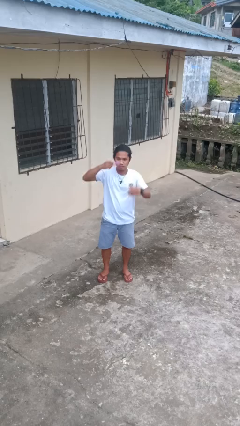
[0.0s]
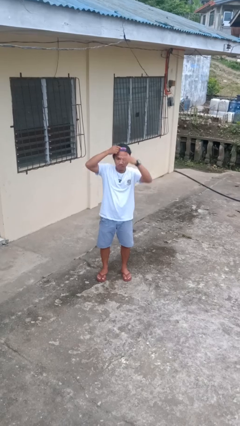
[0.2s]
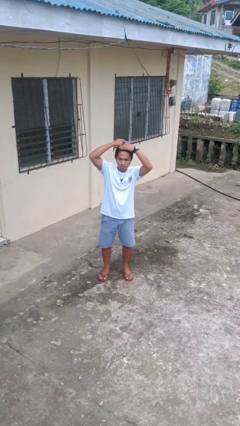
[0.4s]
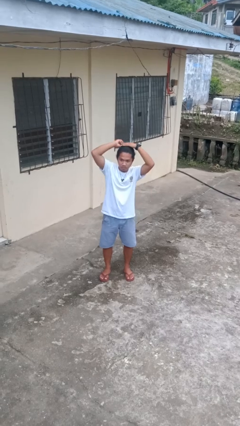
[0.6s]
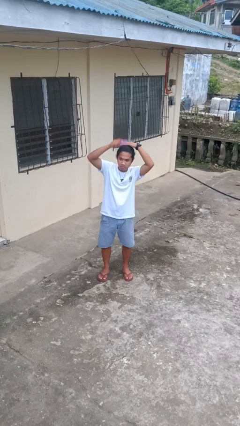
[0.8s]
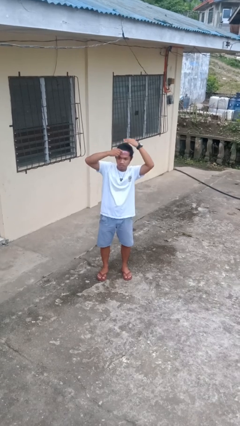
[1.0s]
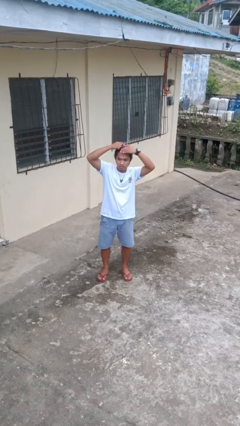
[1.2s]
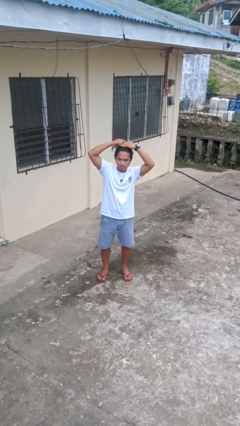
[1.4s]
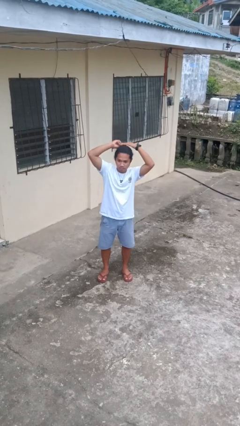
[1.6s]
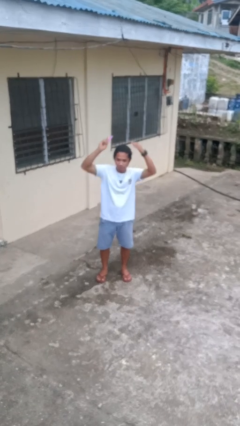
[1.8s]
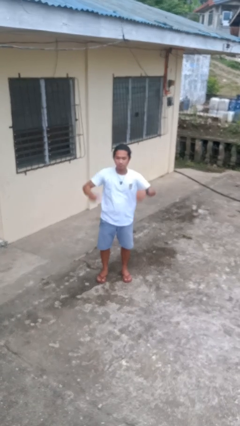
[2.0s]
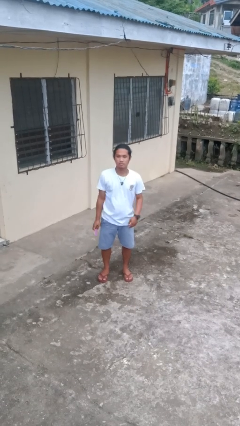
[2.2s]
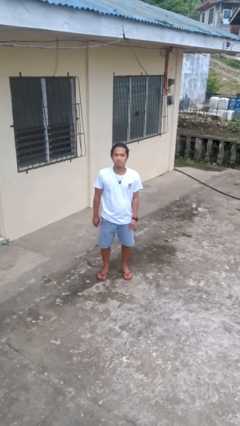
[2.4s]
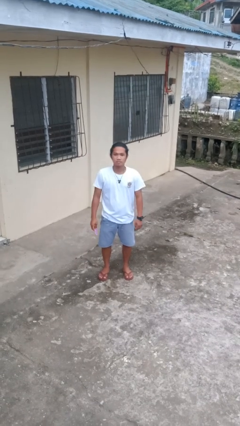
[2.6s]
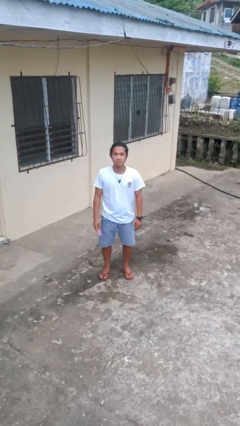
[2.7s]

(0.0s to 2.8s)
person brushes hair

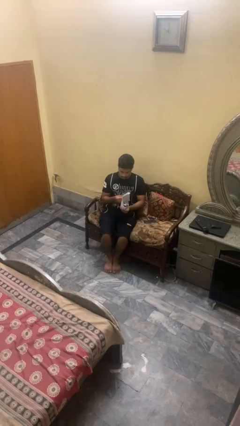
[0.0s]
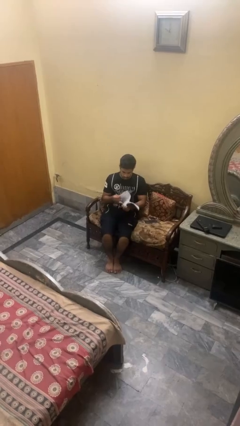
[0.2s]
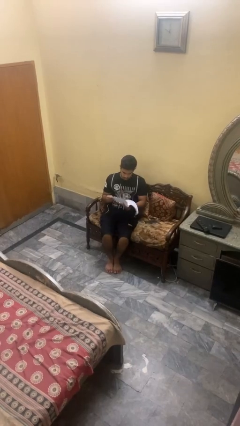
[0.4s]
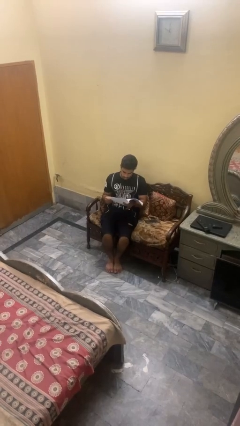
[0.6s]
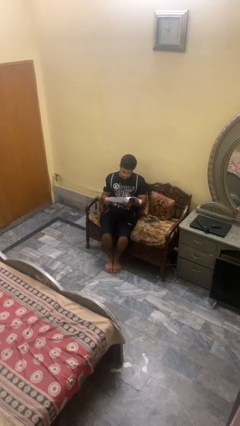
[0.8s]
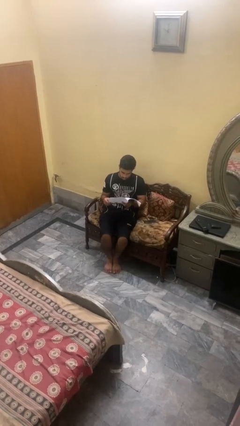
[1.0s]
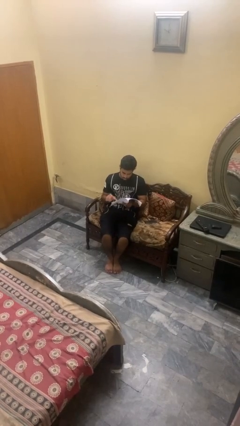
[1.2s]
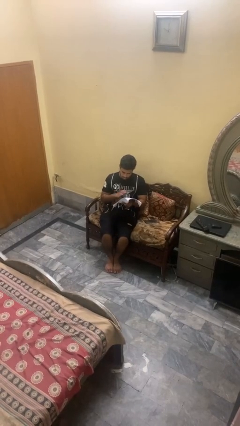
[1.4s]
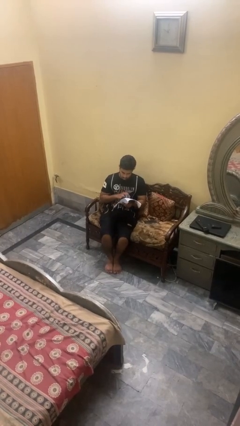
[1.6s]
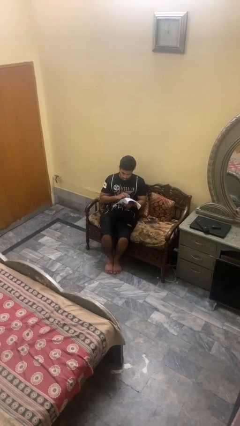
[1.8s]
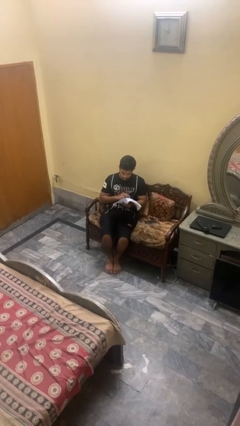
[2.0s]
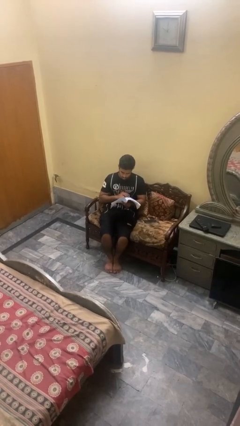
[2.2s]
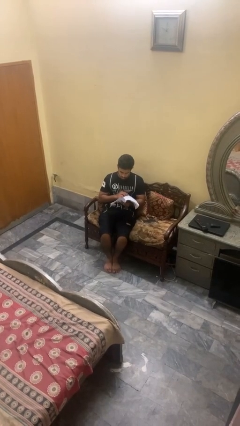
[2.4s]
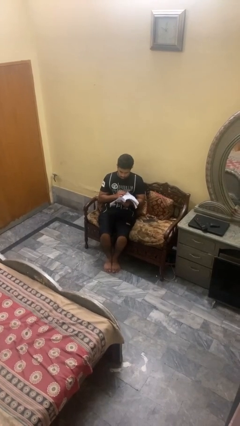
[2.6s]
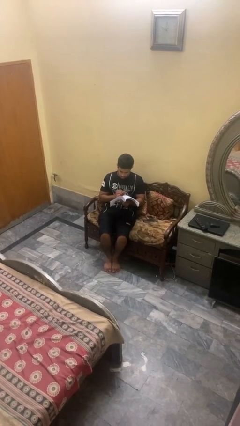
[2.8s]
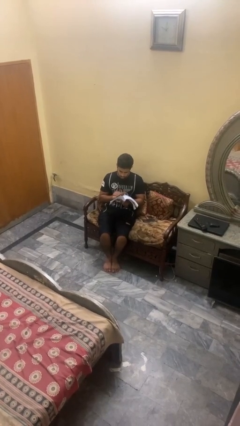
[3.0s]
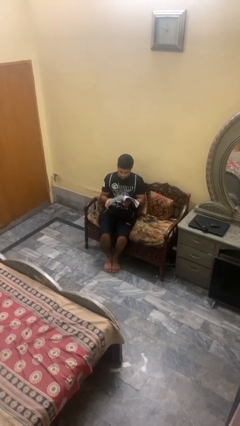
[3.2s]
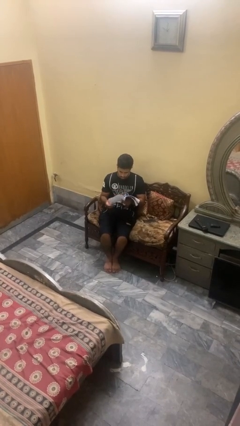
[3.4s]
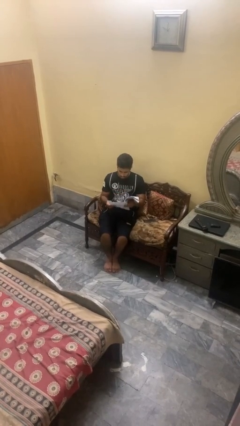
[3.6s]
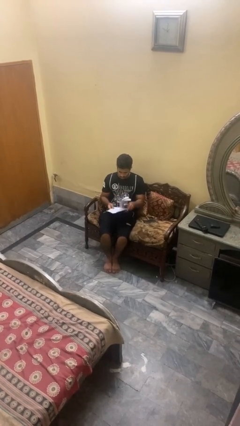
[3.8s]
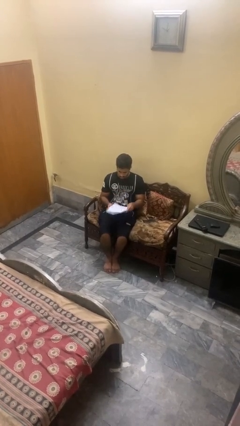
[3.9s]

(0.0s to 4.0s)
person reads magazine

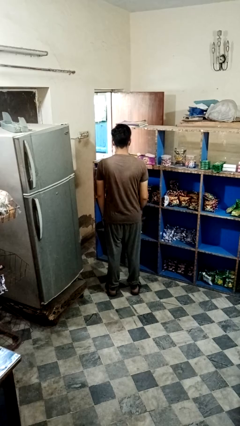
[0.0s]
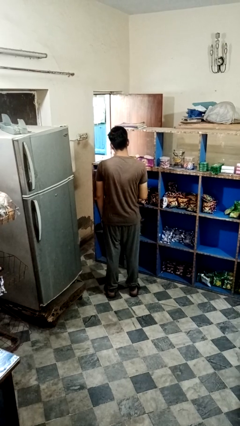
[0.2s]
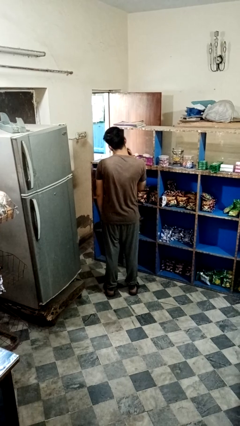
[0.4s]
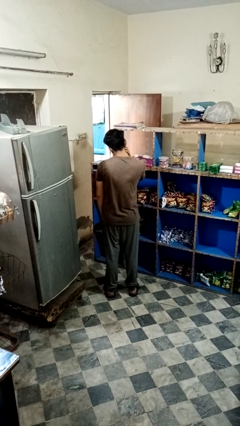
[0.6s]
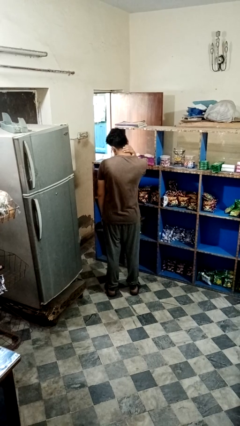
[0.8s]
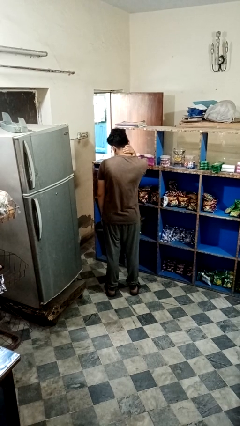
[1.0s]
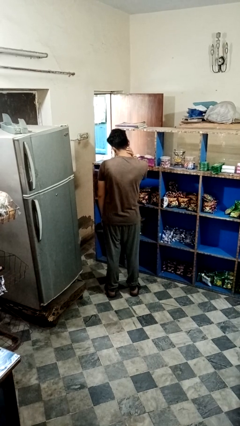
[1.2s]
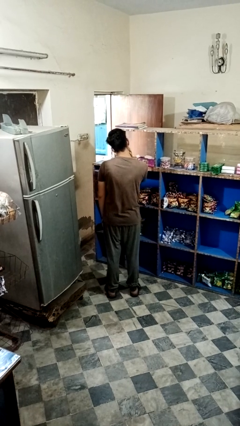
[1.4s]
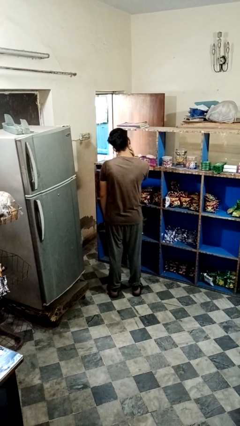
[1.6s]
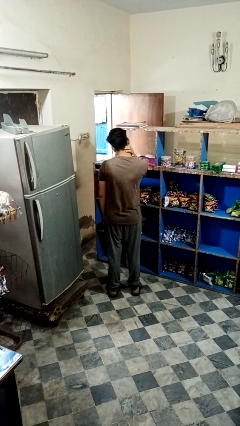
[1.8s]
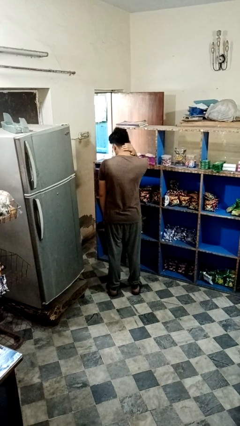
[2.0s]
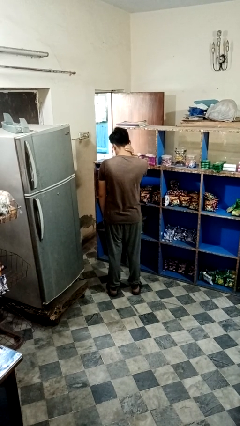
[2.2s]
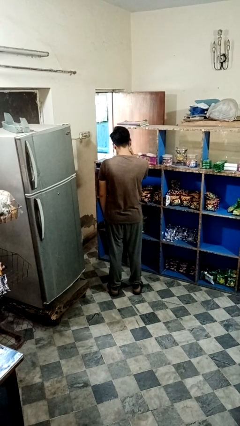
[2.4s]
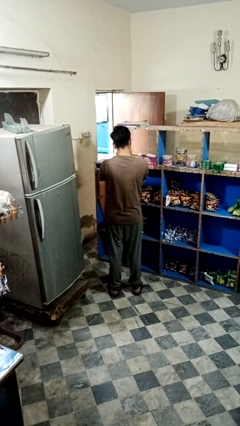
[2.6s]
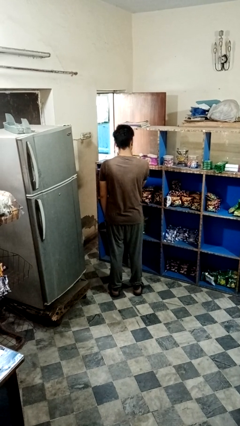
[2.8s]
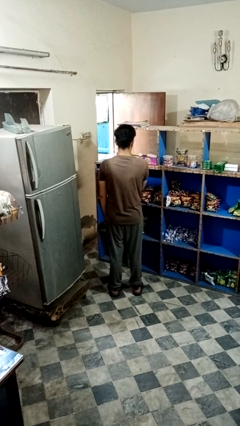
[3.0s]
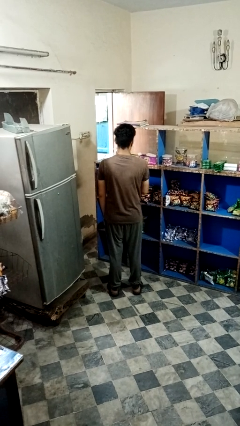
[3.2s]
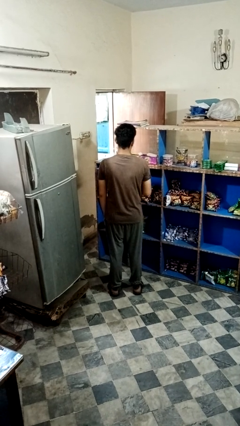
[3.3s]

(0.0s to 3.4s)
person rubs neck

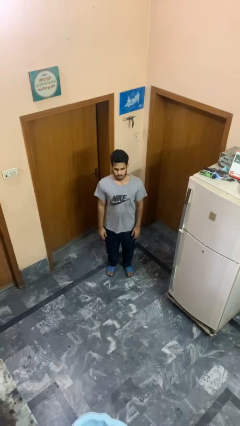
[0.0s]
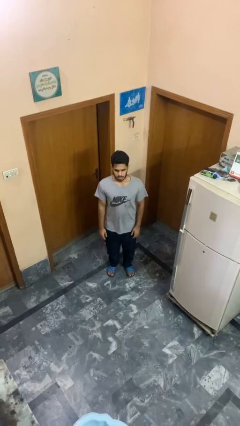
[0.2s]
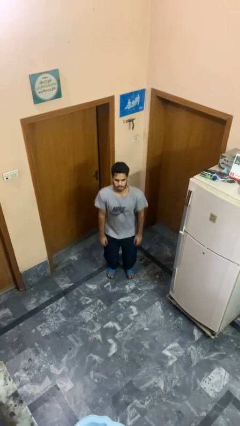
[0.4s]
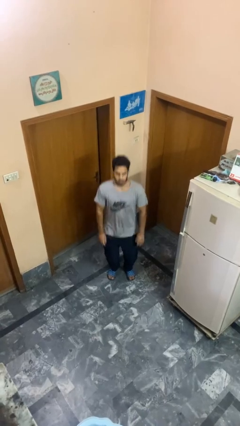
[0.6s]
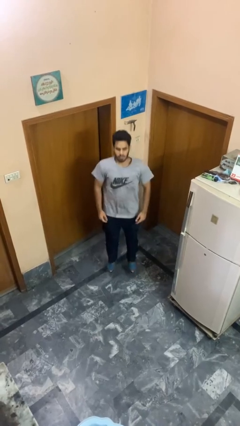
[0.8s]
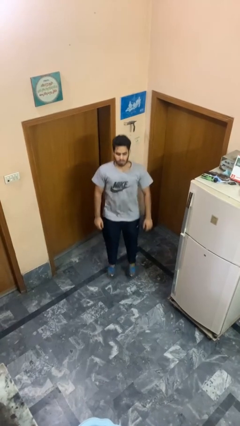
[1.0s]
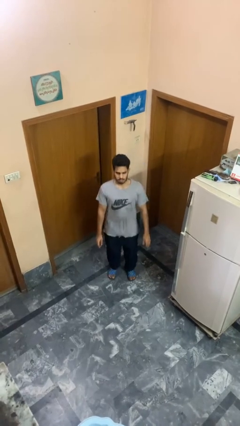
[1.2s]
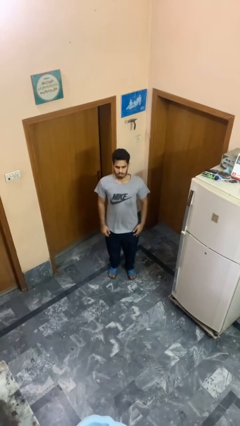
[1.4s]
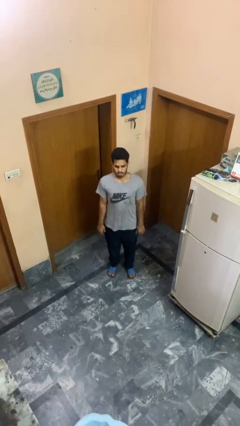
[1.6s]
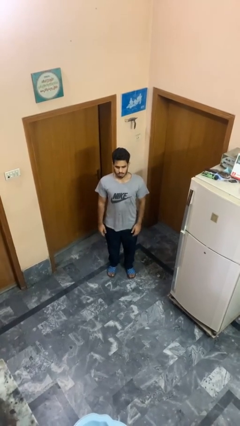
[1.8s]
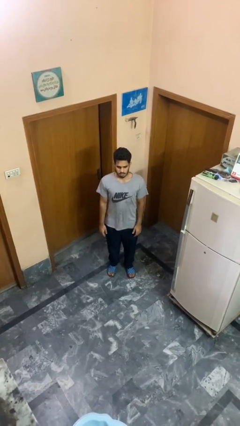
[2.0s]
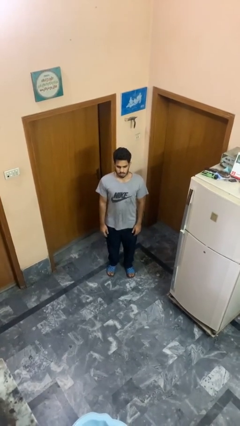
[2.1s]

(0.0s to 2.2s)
person jumps

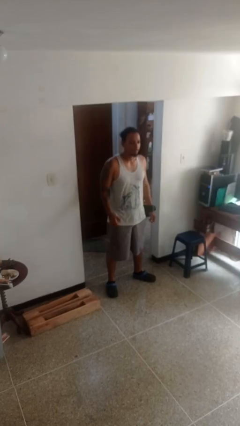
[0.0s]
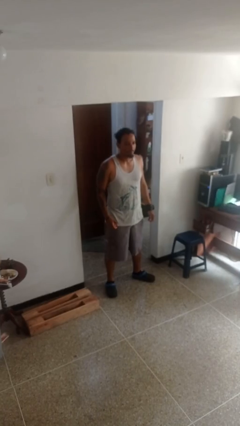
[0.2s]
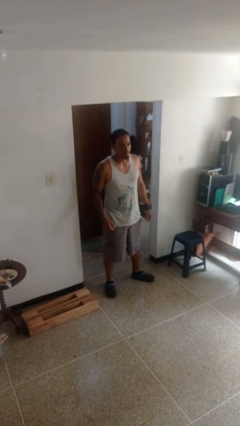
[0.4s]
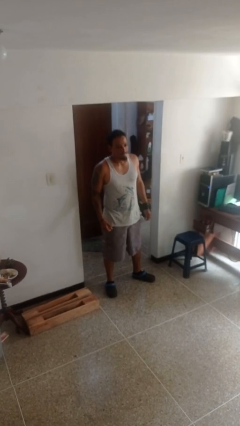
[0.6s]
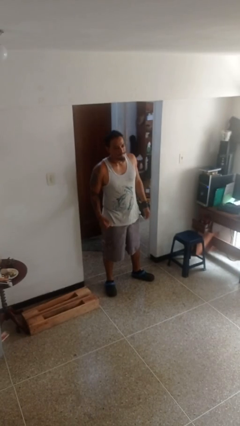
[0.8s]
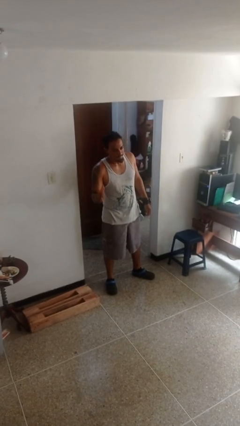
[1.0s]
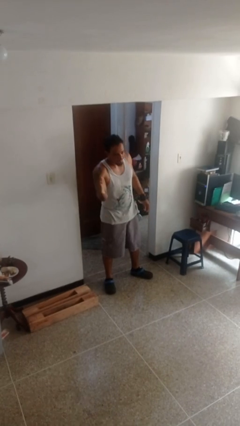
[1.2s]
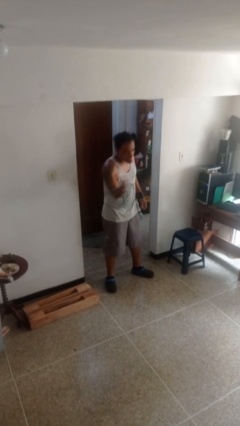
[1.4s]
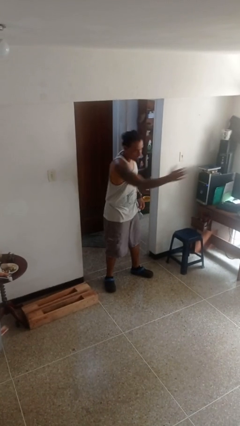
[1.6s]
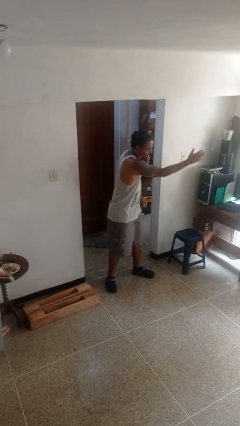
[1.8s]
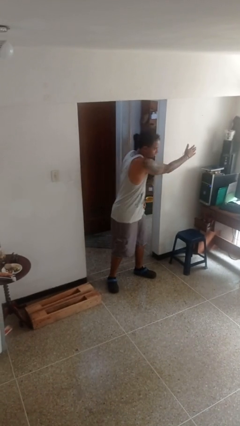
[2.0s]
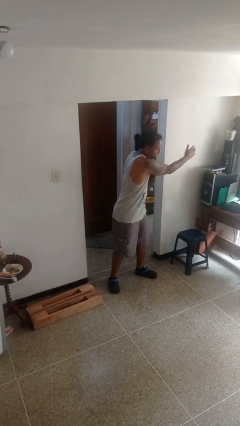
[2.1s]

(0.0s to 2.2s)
person gestures swipe left

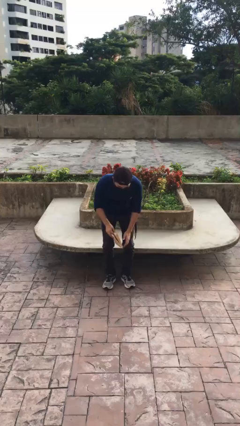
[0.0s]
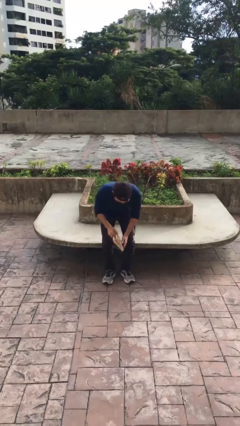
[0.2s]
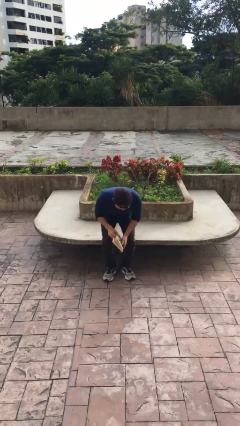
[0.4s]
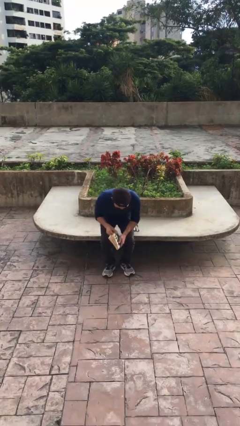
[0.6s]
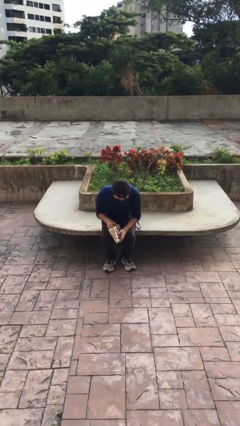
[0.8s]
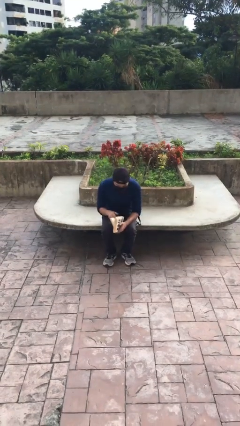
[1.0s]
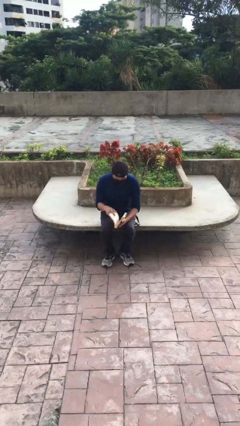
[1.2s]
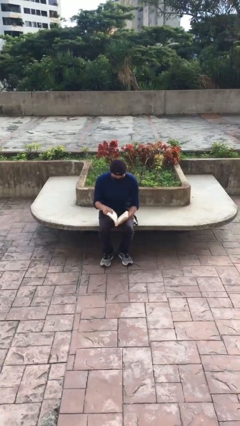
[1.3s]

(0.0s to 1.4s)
person sits down

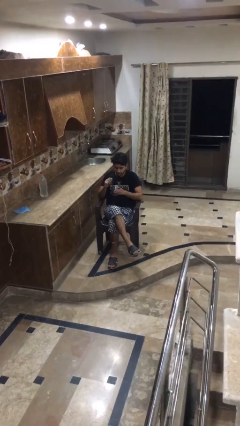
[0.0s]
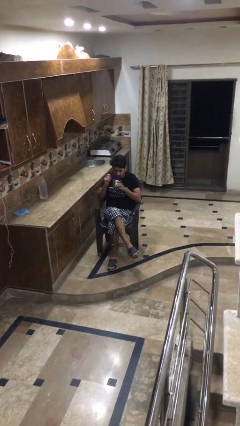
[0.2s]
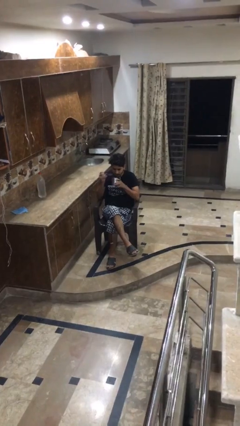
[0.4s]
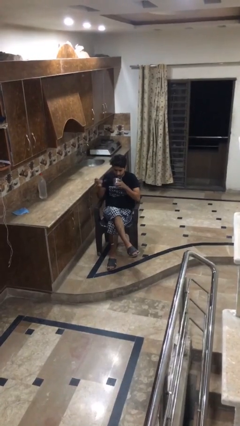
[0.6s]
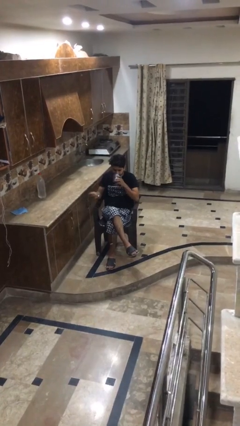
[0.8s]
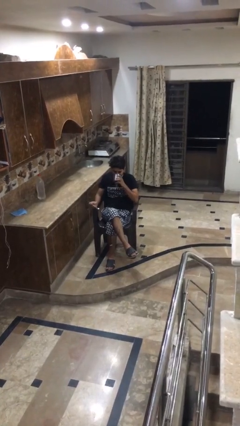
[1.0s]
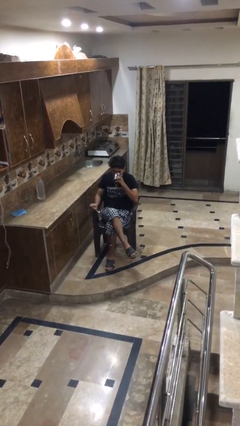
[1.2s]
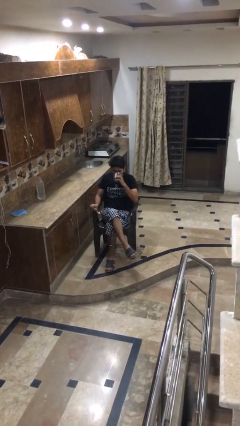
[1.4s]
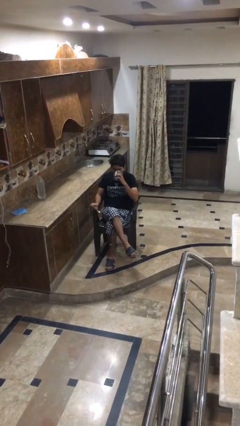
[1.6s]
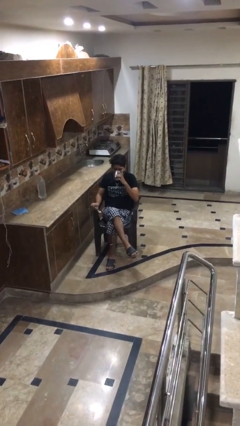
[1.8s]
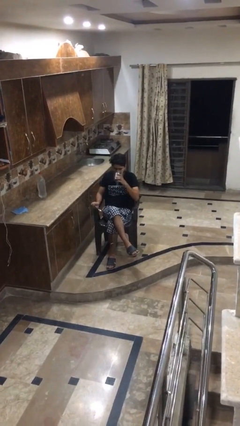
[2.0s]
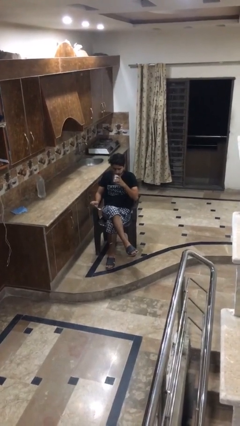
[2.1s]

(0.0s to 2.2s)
person drinks from mug
